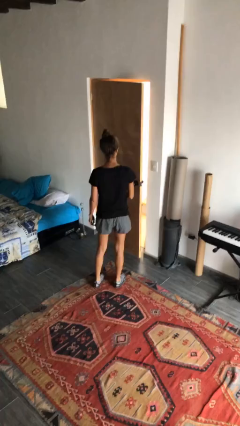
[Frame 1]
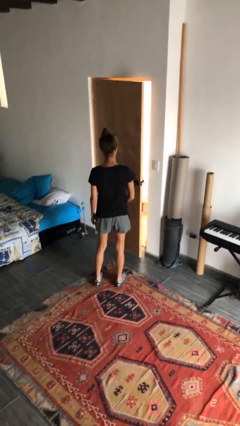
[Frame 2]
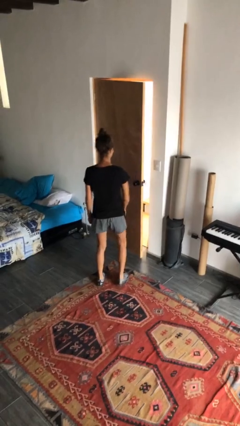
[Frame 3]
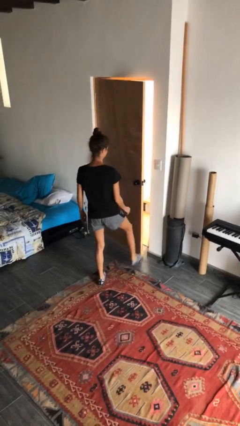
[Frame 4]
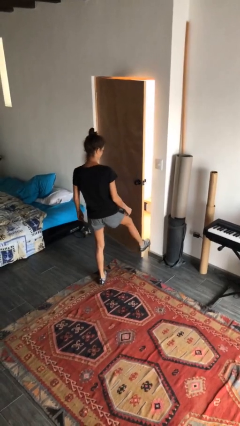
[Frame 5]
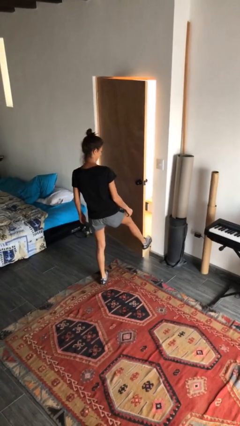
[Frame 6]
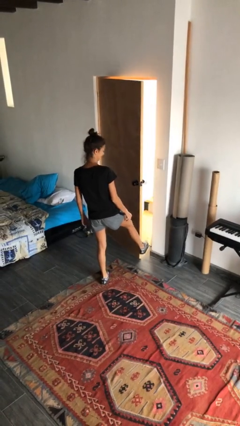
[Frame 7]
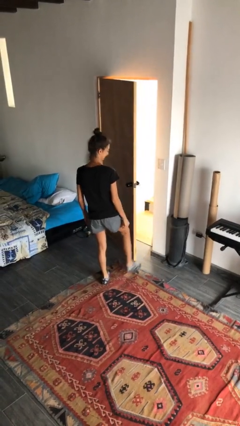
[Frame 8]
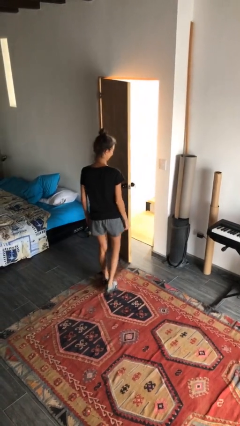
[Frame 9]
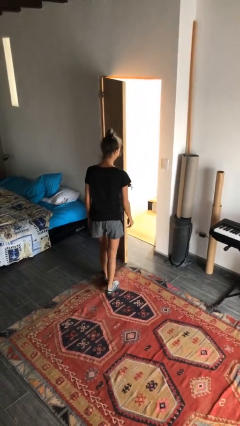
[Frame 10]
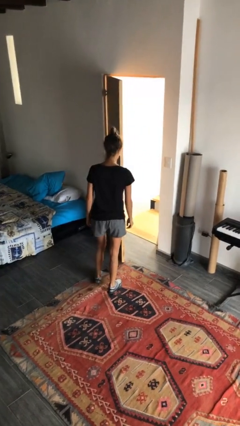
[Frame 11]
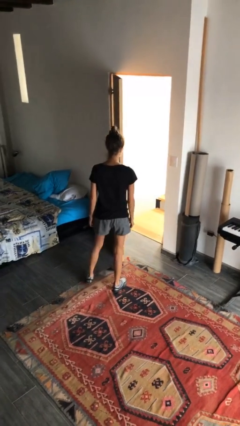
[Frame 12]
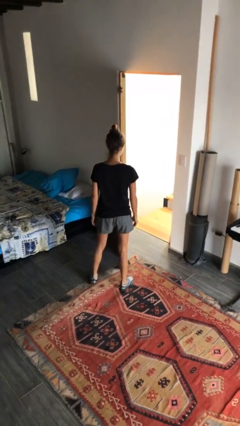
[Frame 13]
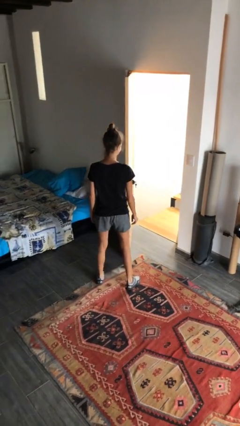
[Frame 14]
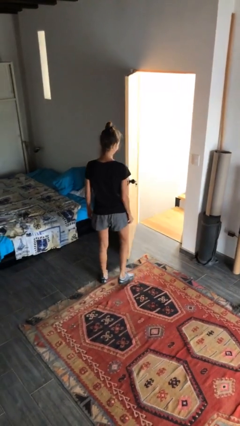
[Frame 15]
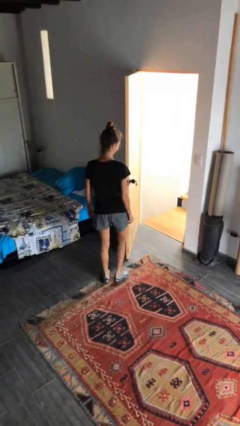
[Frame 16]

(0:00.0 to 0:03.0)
person opens facility door

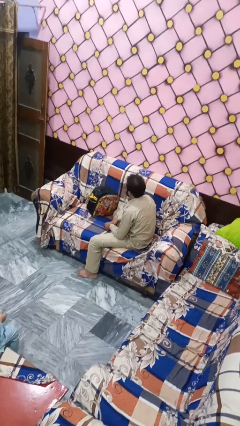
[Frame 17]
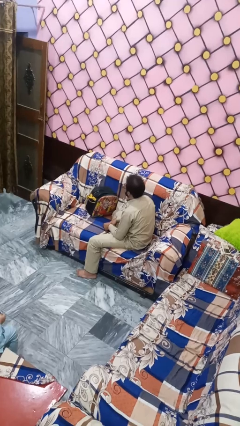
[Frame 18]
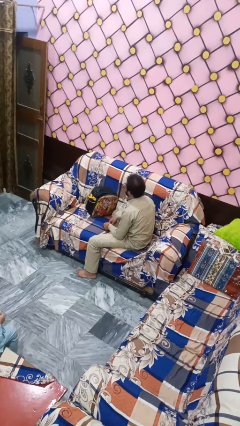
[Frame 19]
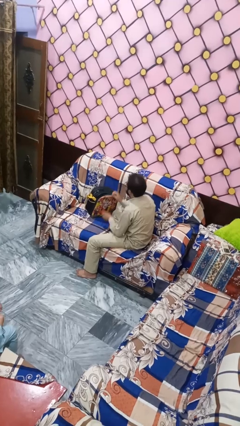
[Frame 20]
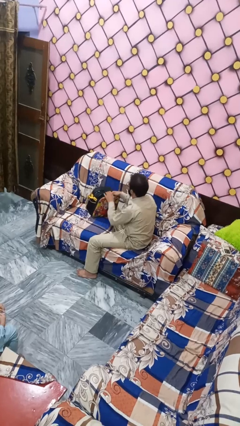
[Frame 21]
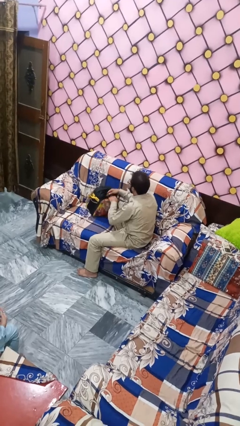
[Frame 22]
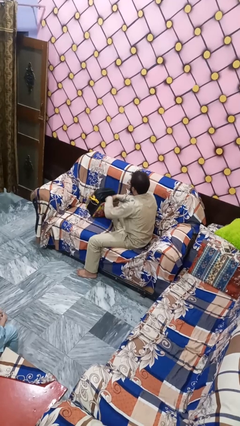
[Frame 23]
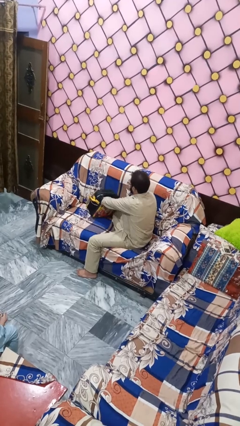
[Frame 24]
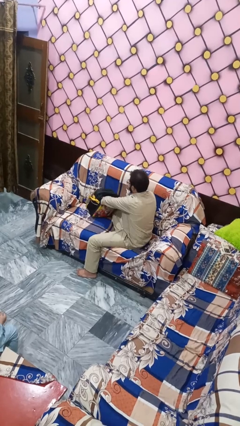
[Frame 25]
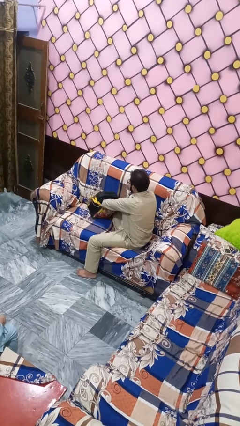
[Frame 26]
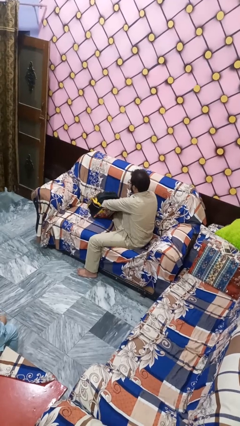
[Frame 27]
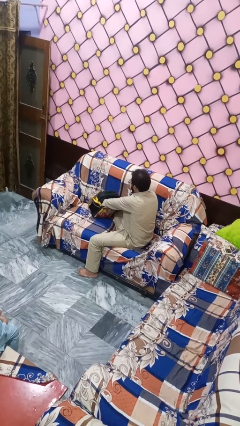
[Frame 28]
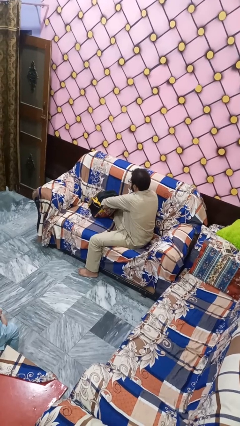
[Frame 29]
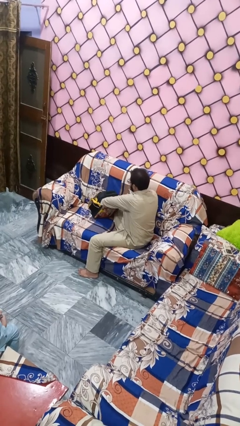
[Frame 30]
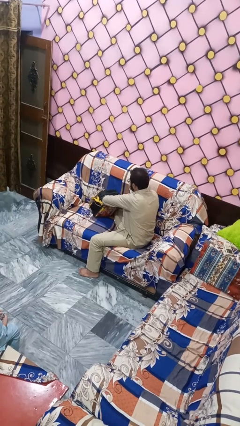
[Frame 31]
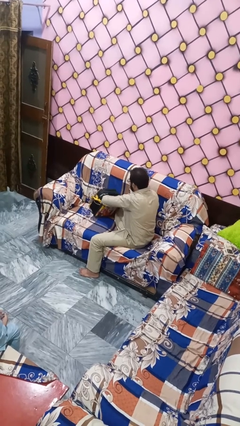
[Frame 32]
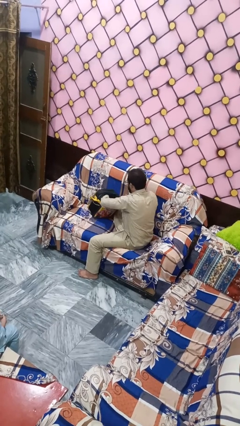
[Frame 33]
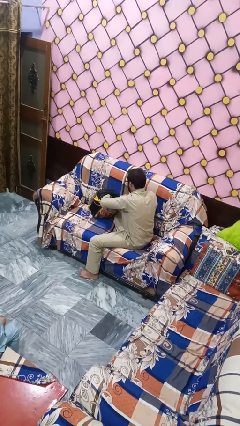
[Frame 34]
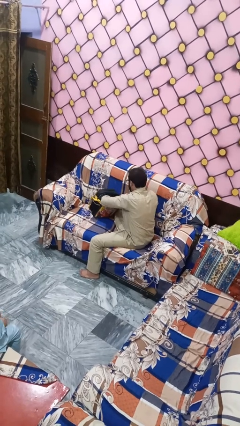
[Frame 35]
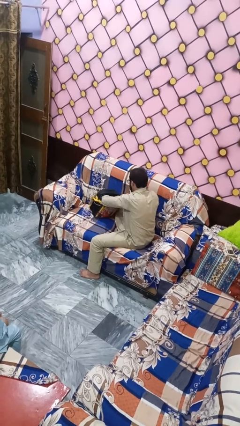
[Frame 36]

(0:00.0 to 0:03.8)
person searches in bag

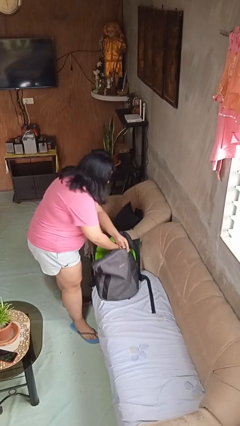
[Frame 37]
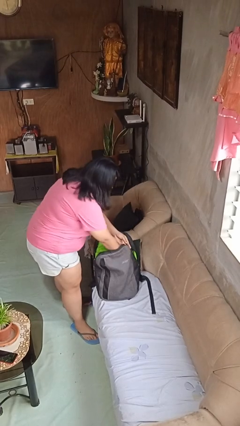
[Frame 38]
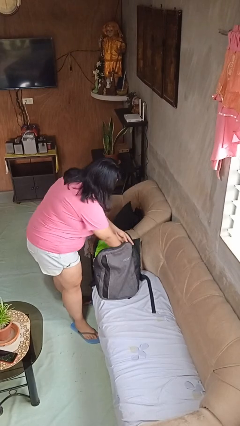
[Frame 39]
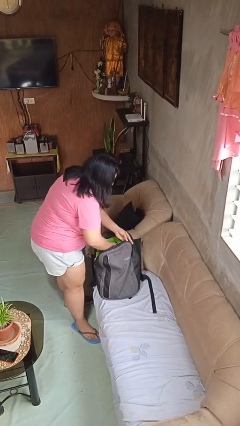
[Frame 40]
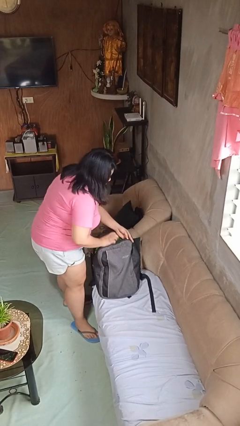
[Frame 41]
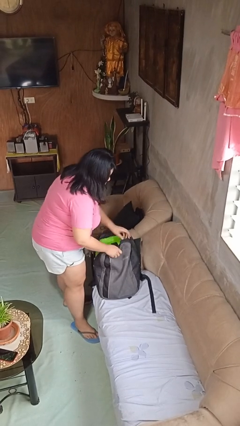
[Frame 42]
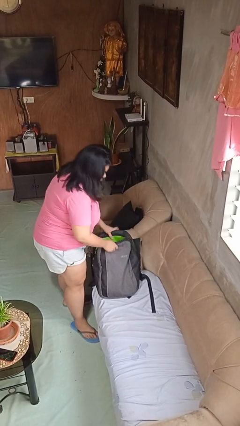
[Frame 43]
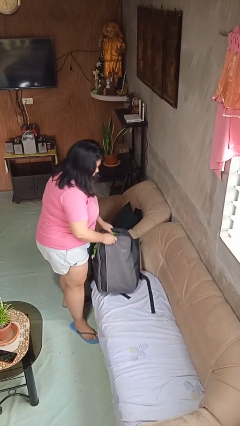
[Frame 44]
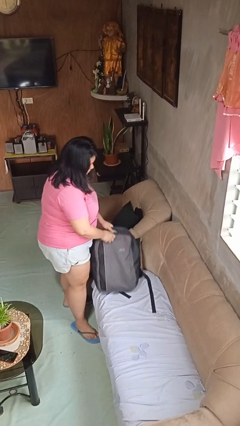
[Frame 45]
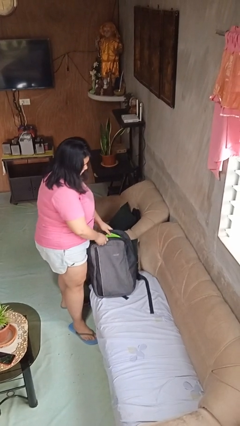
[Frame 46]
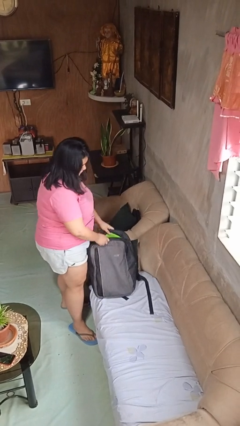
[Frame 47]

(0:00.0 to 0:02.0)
person puts object into backpack

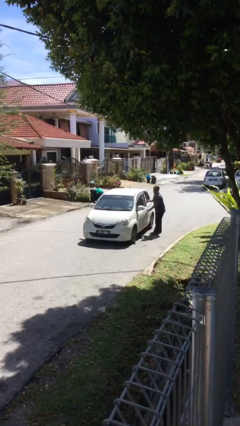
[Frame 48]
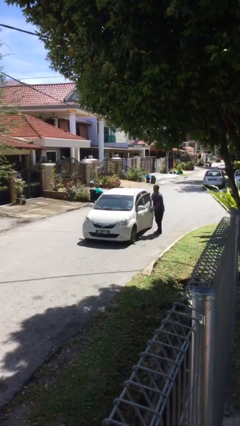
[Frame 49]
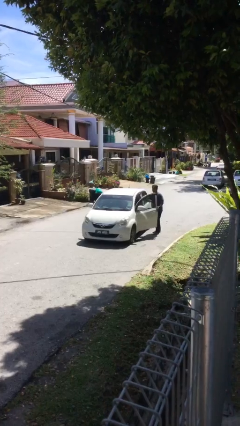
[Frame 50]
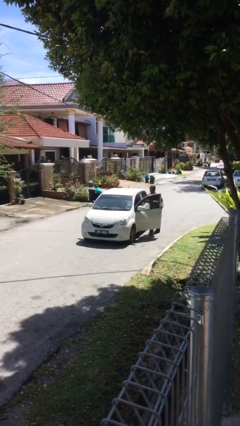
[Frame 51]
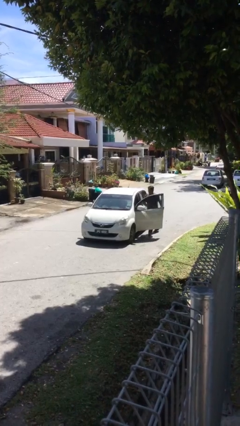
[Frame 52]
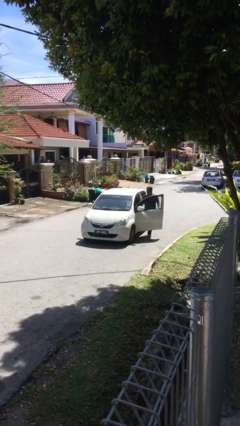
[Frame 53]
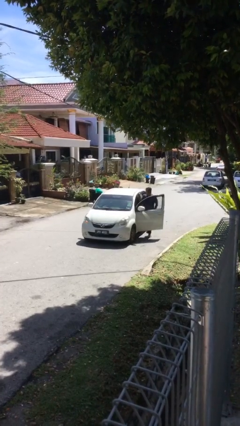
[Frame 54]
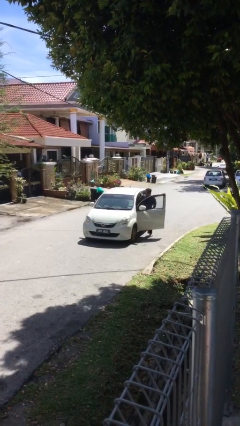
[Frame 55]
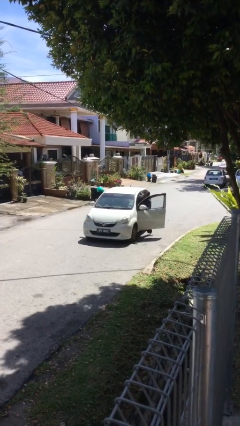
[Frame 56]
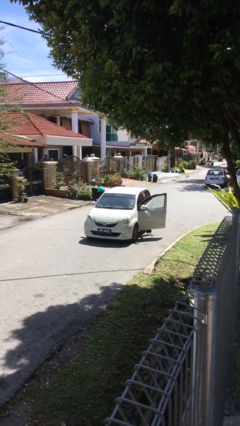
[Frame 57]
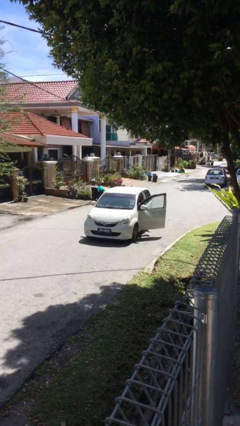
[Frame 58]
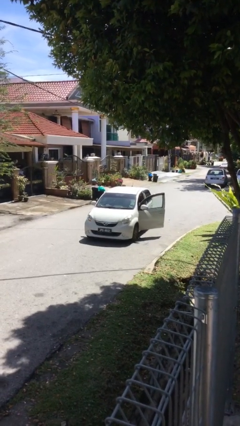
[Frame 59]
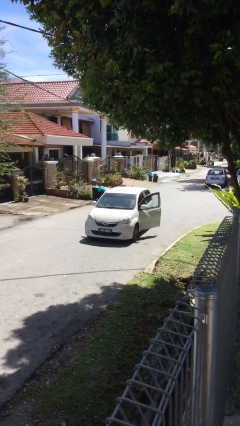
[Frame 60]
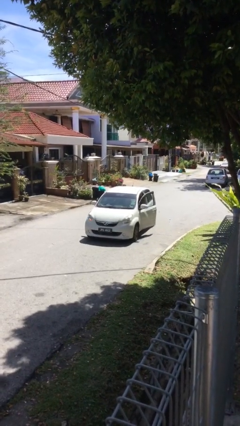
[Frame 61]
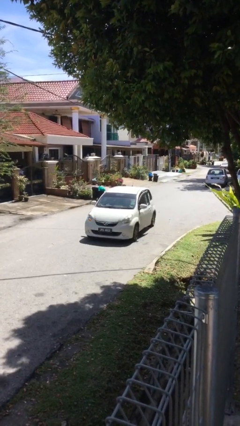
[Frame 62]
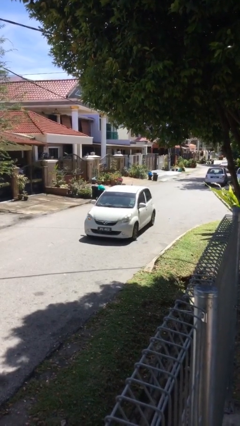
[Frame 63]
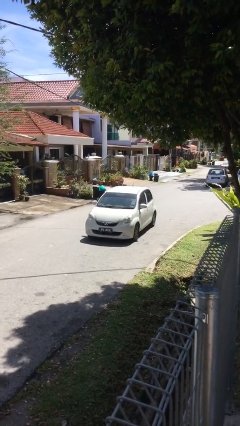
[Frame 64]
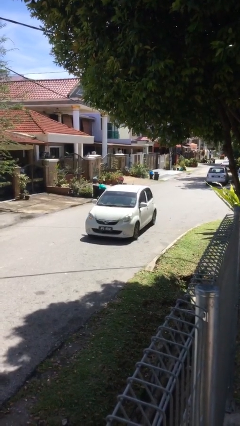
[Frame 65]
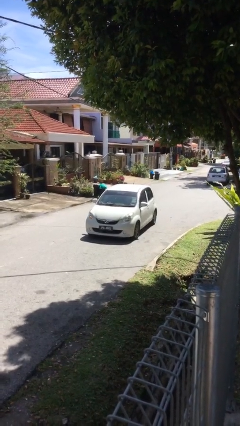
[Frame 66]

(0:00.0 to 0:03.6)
car picks up person

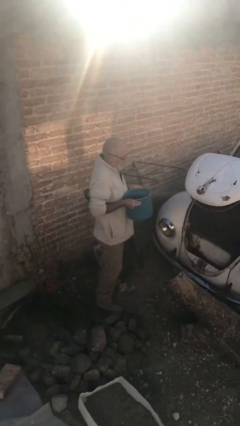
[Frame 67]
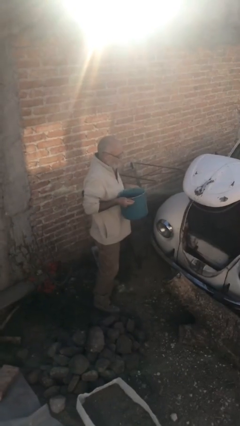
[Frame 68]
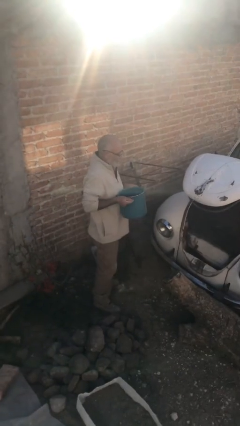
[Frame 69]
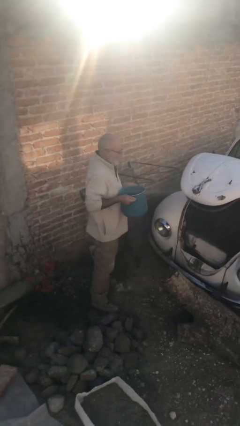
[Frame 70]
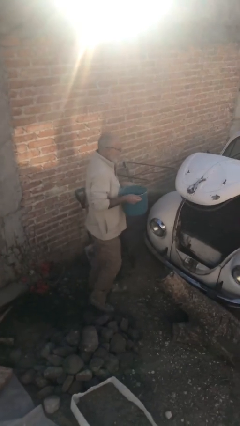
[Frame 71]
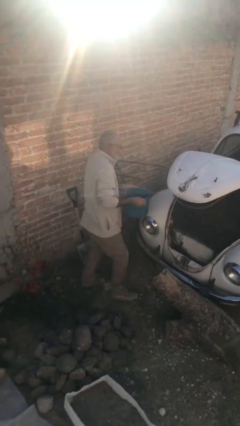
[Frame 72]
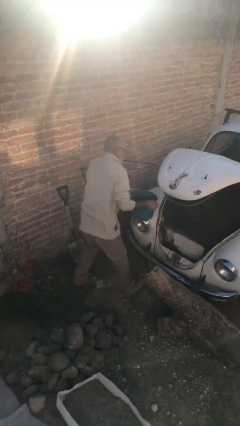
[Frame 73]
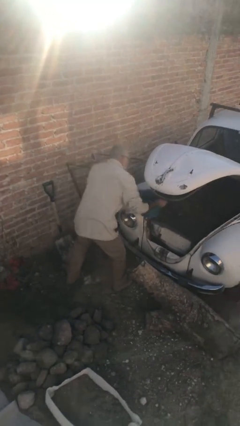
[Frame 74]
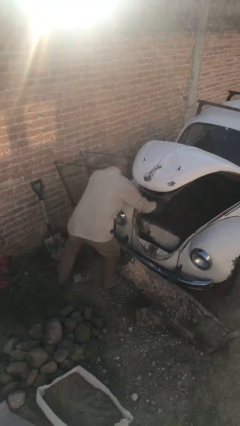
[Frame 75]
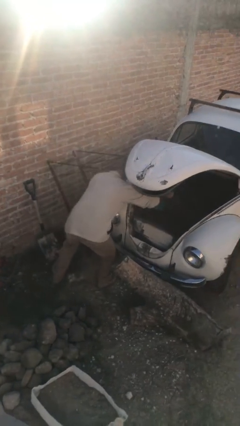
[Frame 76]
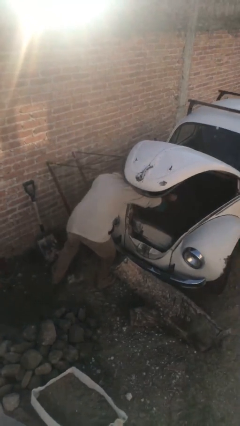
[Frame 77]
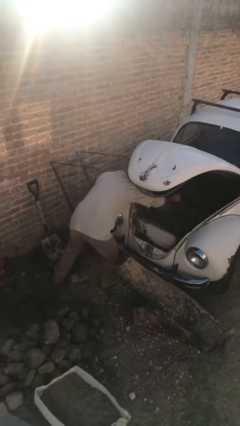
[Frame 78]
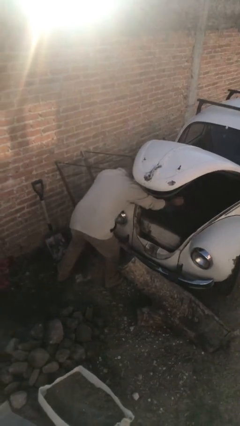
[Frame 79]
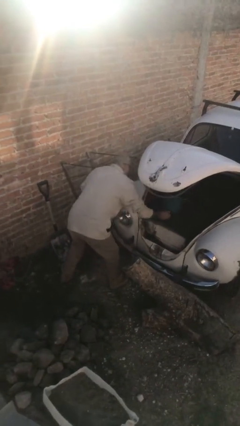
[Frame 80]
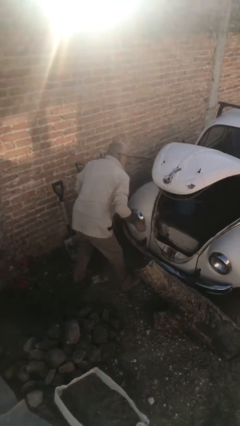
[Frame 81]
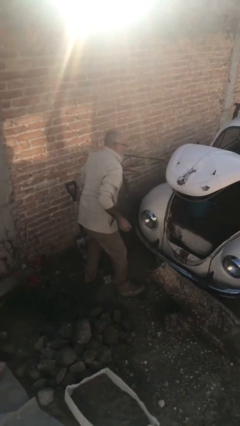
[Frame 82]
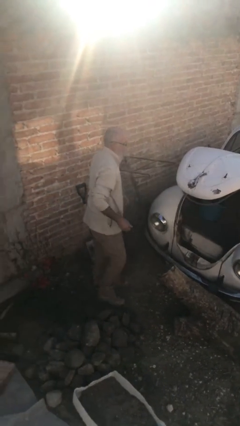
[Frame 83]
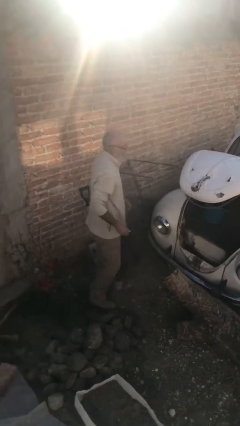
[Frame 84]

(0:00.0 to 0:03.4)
person loads car

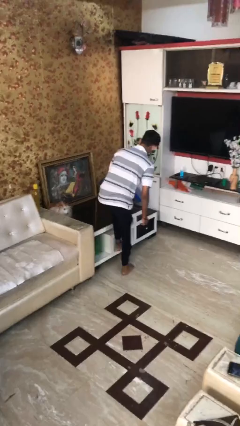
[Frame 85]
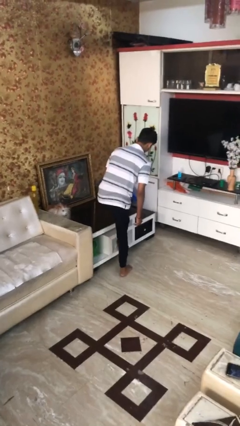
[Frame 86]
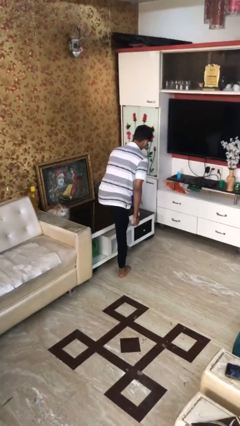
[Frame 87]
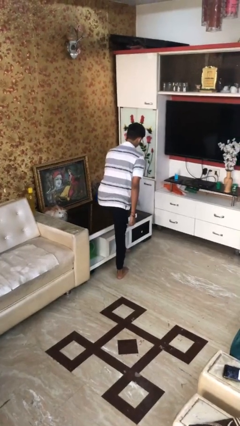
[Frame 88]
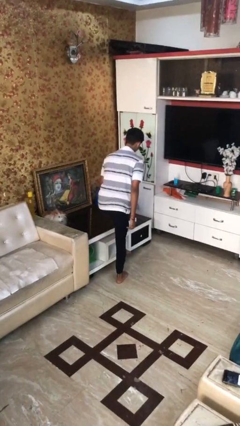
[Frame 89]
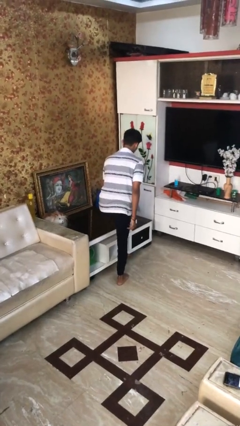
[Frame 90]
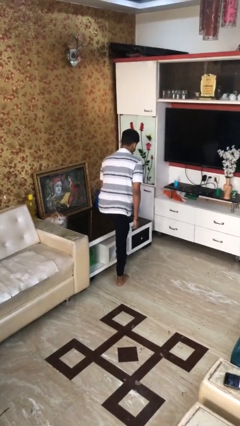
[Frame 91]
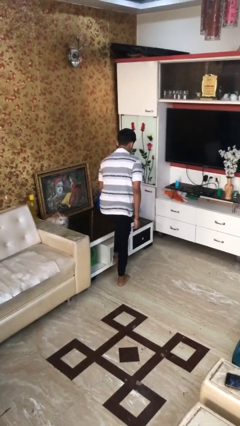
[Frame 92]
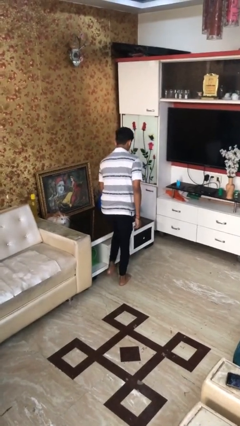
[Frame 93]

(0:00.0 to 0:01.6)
person bumps into table
